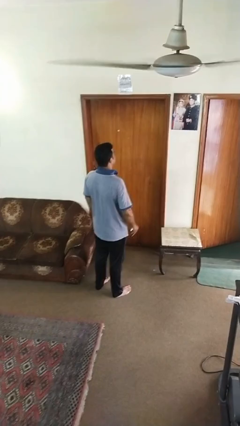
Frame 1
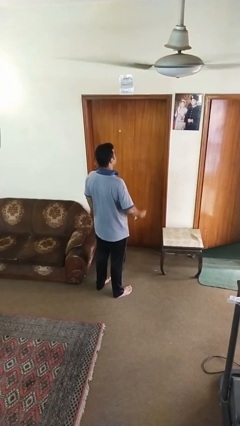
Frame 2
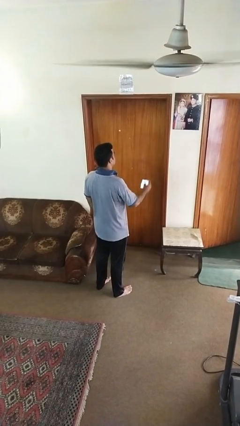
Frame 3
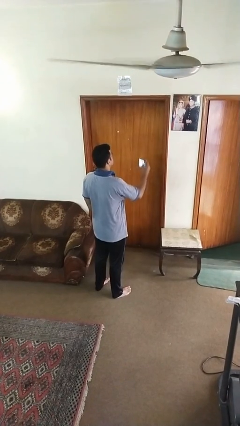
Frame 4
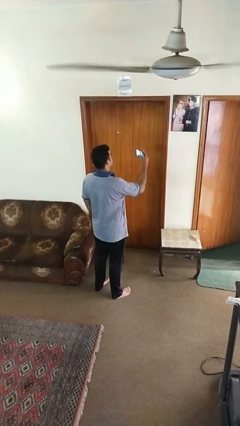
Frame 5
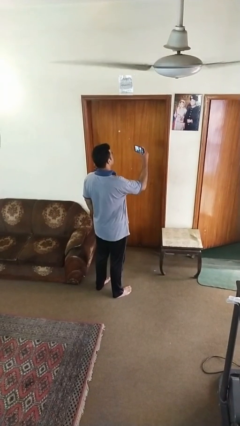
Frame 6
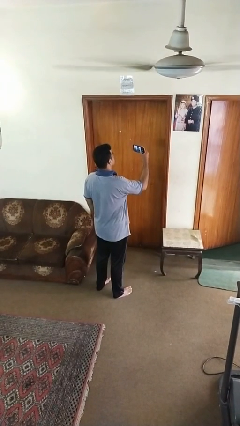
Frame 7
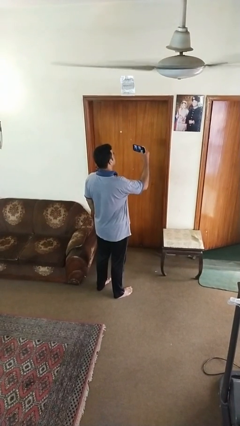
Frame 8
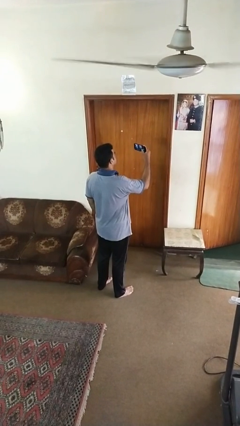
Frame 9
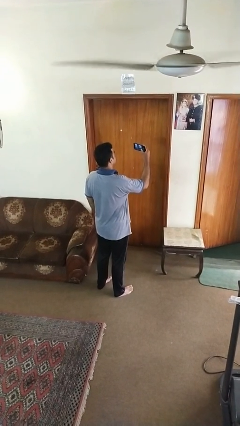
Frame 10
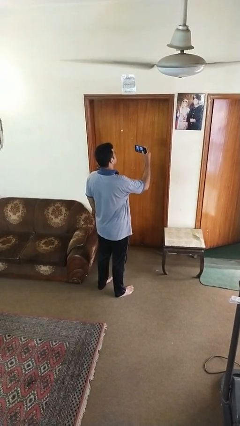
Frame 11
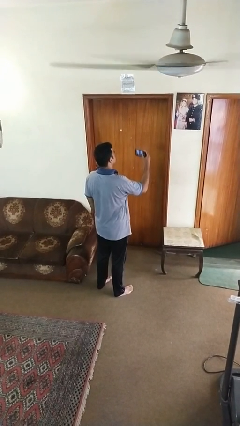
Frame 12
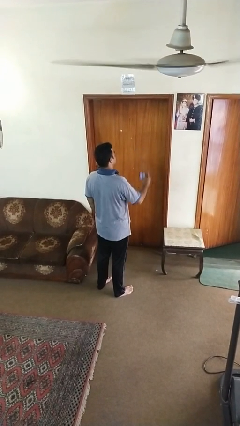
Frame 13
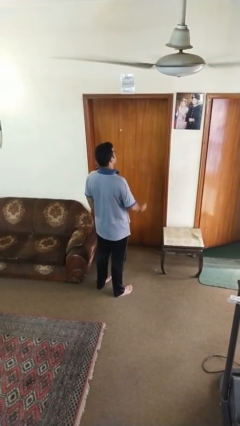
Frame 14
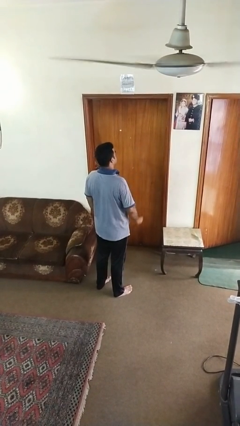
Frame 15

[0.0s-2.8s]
person takes selfie

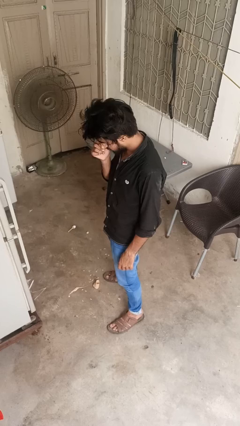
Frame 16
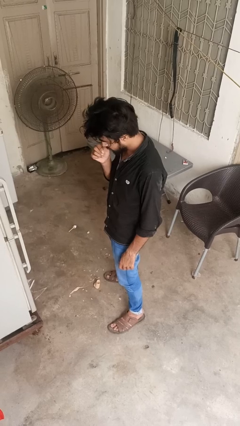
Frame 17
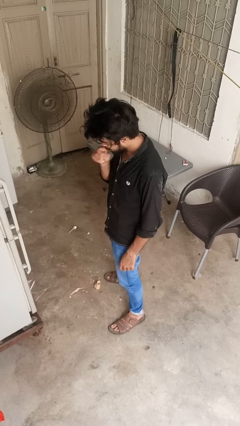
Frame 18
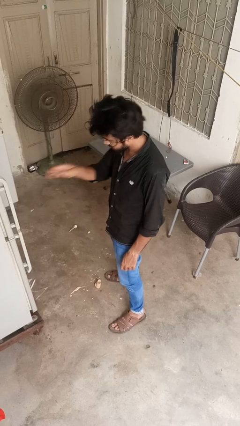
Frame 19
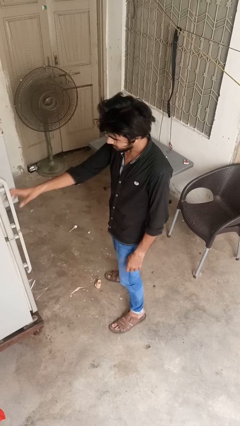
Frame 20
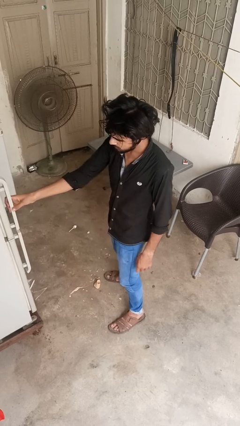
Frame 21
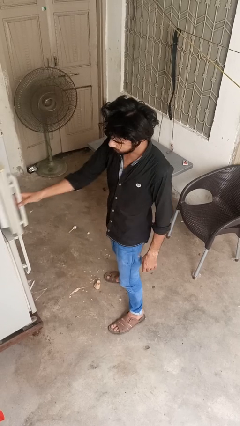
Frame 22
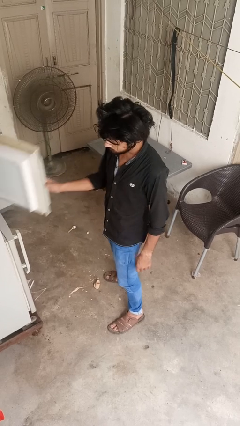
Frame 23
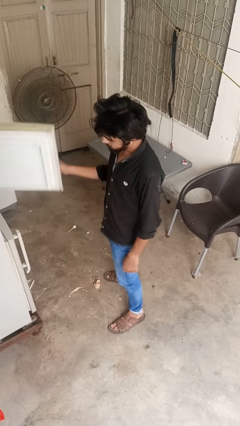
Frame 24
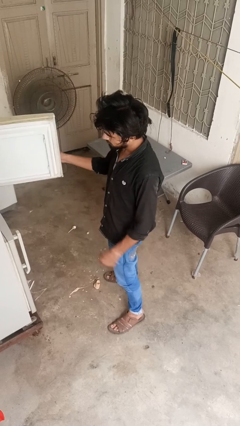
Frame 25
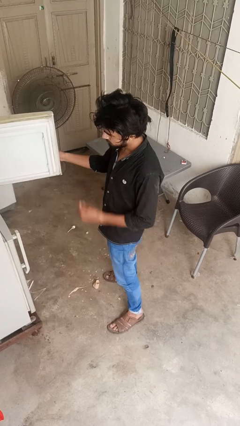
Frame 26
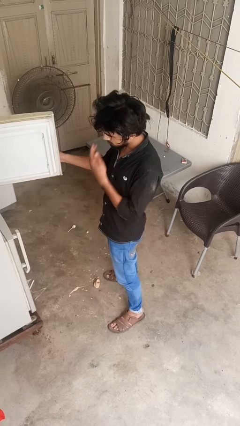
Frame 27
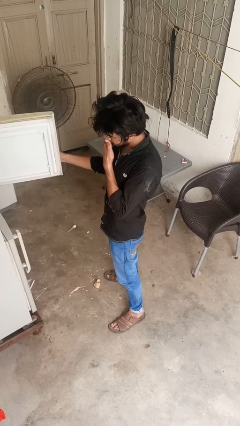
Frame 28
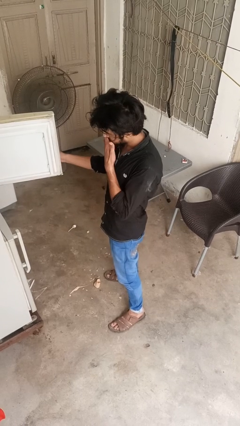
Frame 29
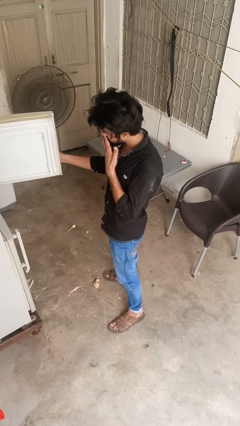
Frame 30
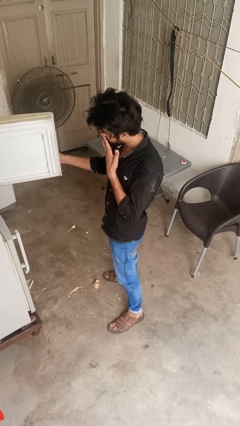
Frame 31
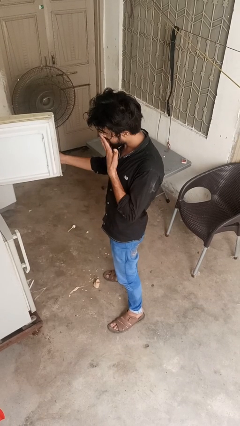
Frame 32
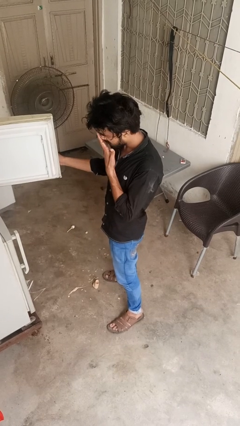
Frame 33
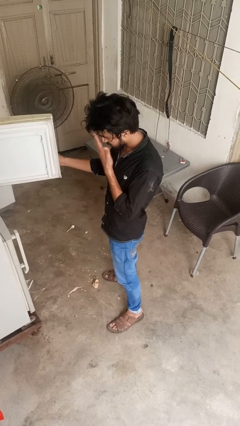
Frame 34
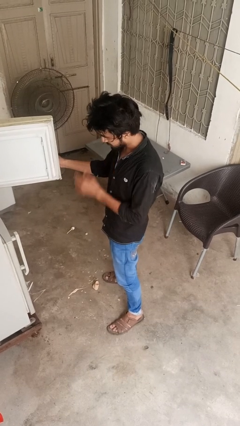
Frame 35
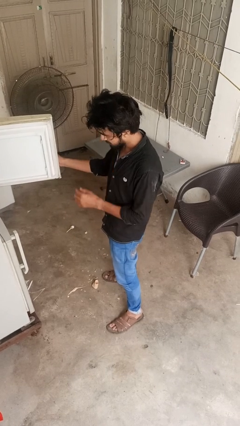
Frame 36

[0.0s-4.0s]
person opens refrigerator

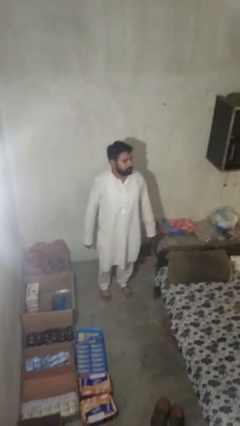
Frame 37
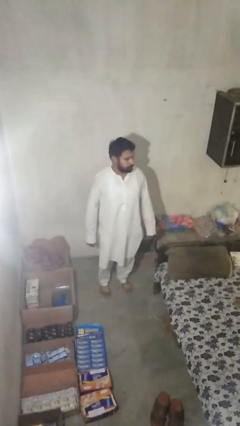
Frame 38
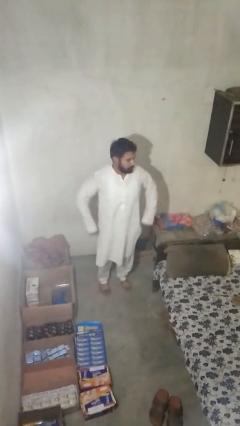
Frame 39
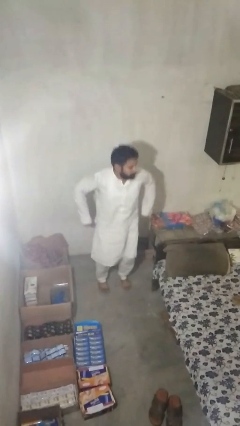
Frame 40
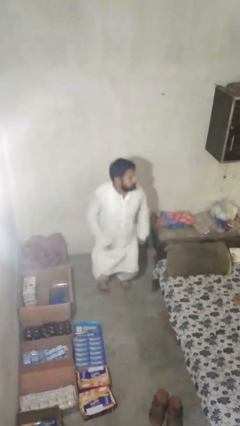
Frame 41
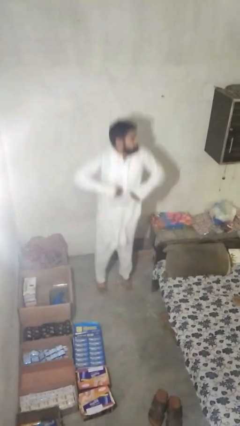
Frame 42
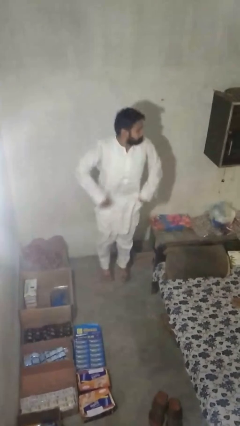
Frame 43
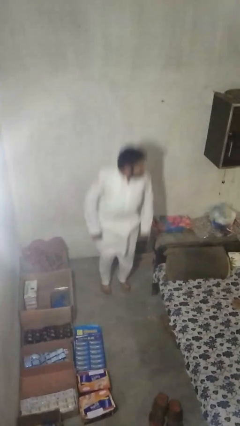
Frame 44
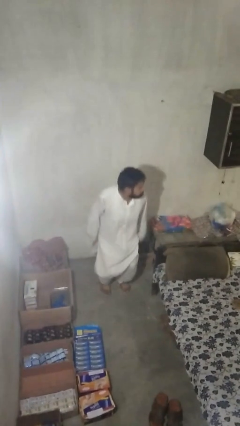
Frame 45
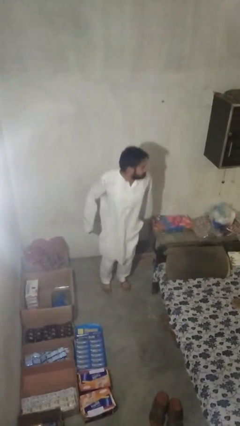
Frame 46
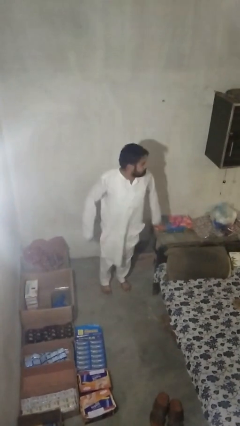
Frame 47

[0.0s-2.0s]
person jumps

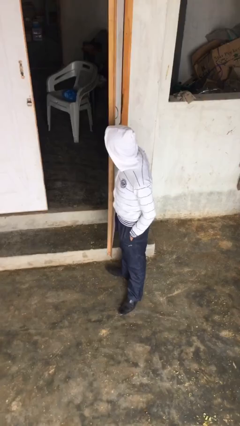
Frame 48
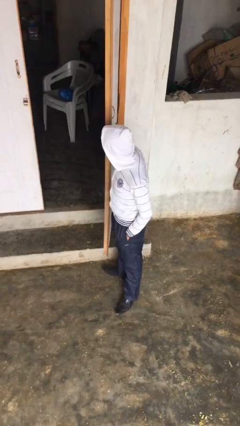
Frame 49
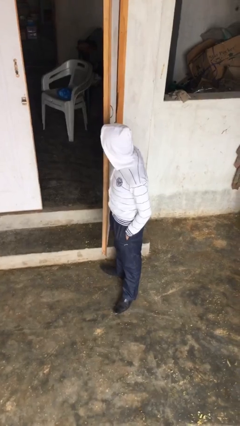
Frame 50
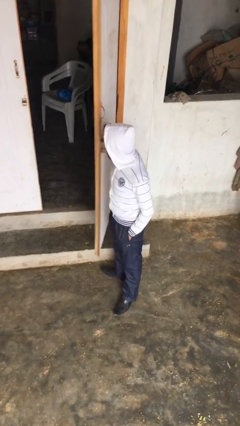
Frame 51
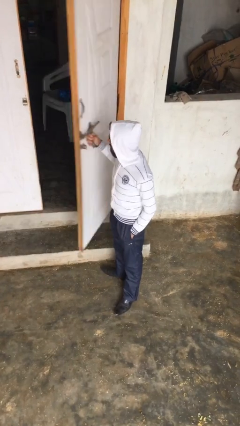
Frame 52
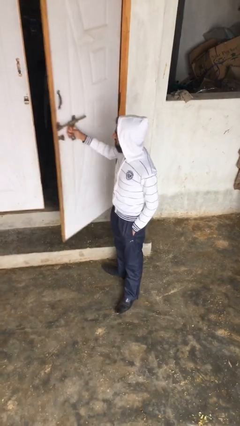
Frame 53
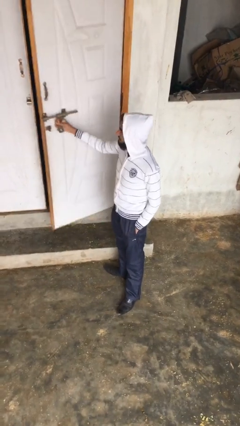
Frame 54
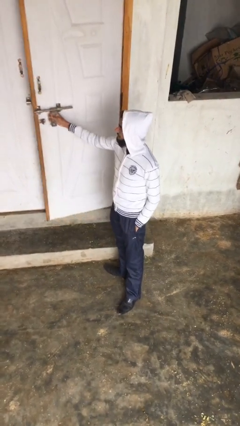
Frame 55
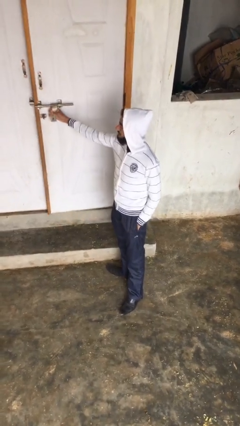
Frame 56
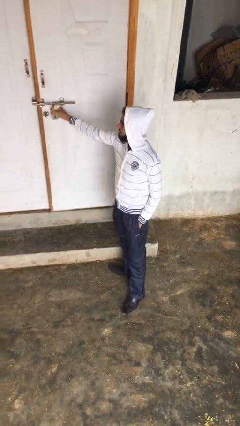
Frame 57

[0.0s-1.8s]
person closes facility door

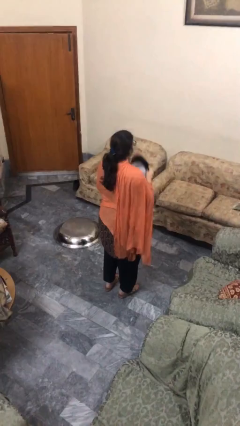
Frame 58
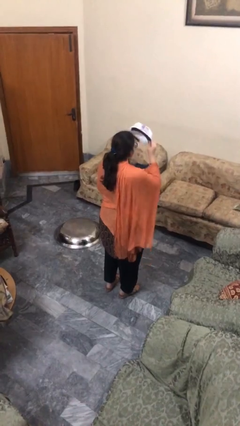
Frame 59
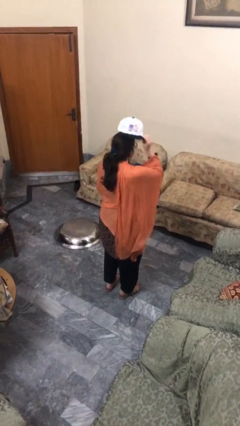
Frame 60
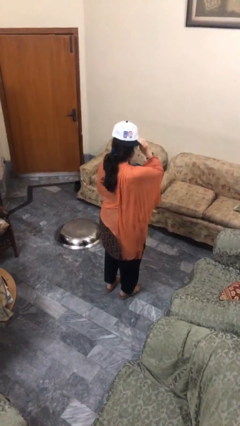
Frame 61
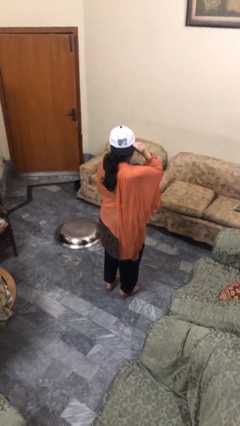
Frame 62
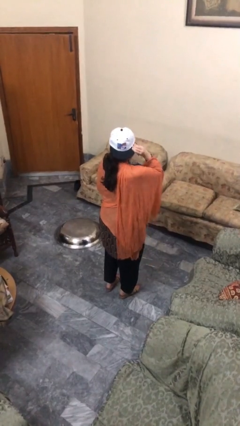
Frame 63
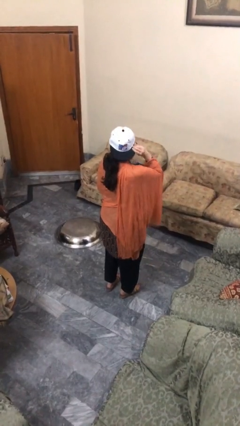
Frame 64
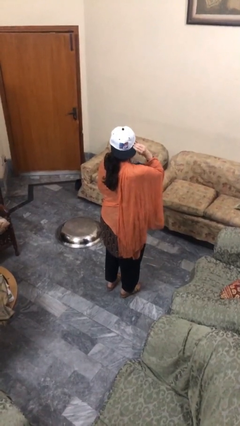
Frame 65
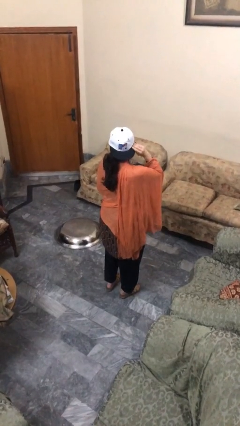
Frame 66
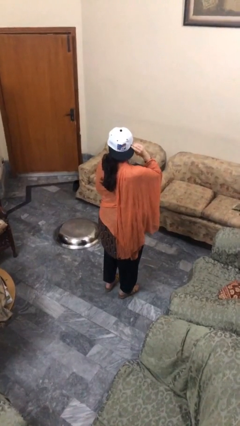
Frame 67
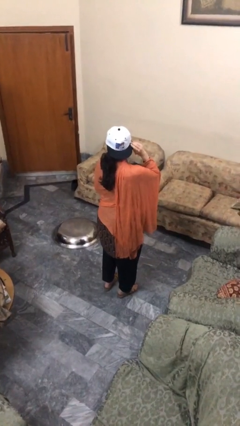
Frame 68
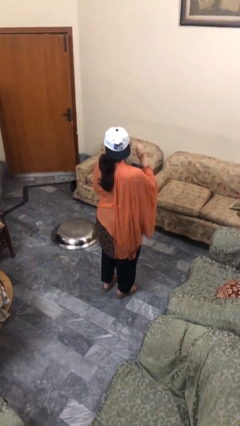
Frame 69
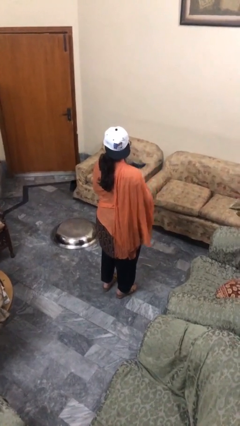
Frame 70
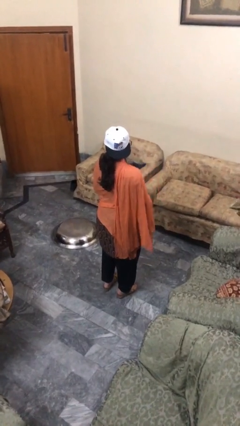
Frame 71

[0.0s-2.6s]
person puts on hat

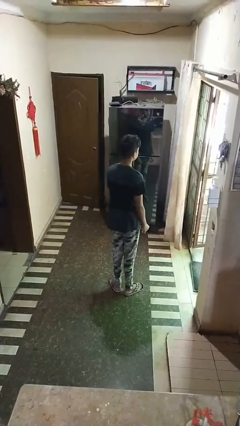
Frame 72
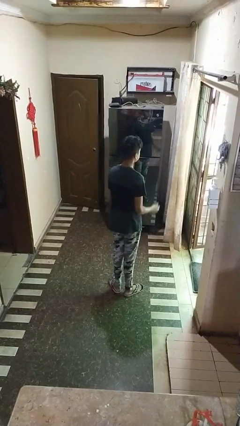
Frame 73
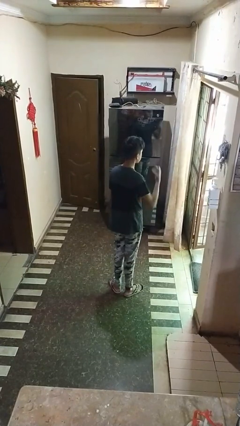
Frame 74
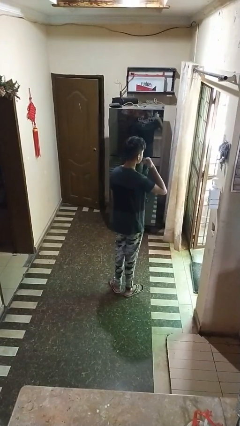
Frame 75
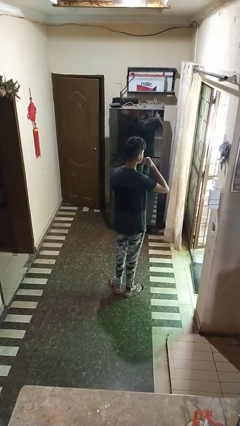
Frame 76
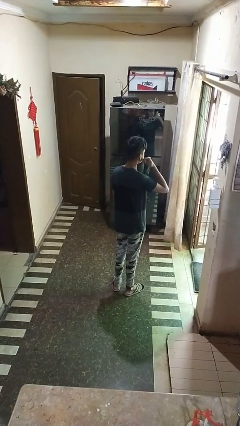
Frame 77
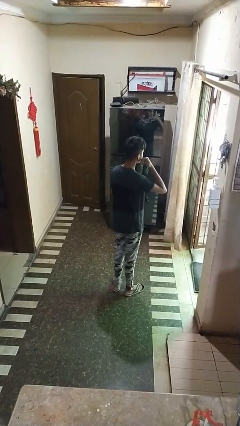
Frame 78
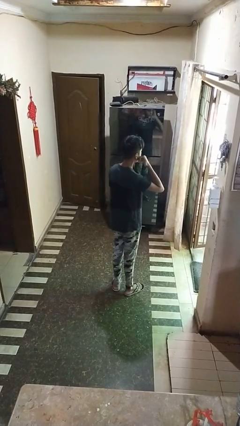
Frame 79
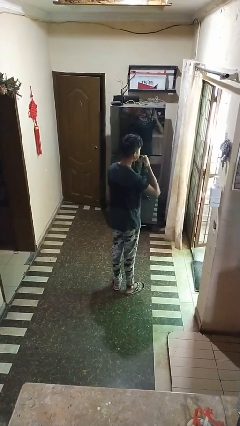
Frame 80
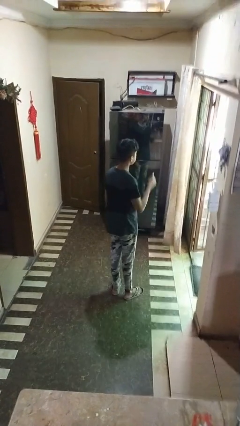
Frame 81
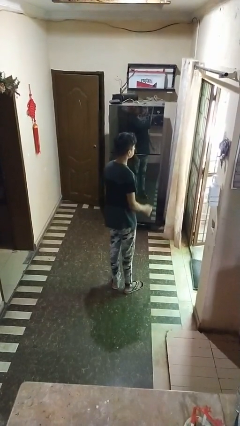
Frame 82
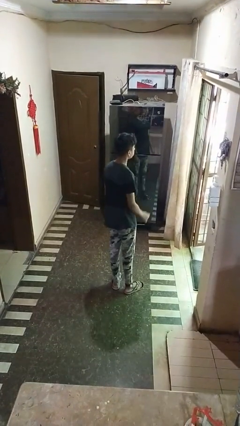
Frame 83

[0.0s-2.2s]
person gestures call me

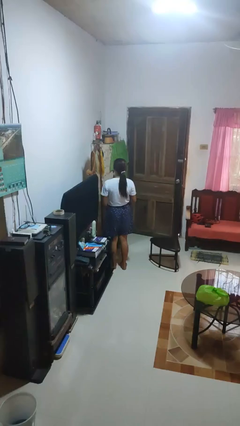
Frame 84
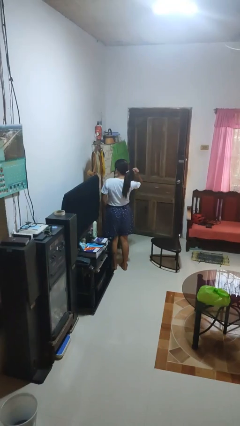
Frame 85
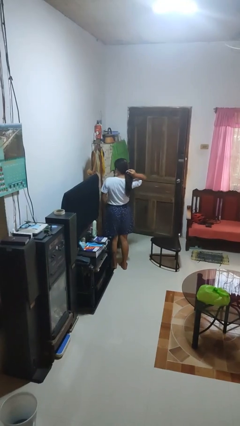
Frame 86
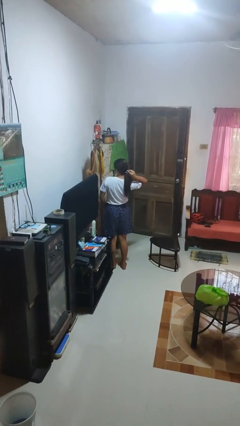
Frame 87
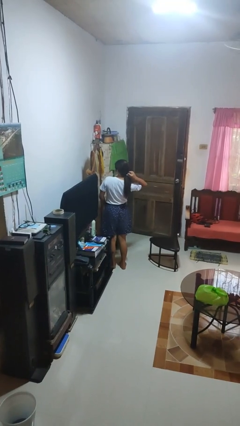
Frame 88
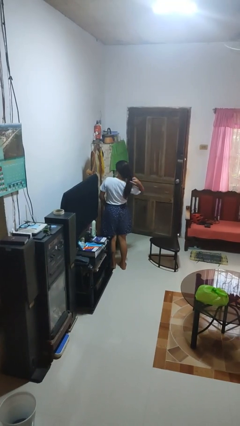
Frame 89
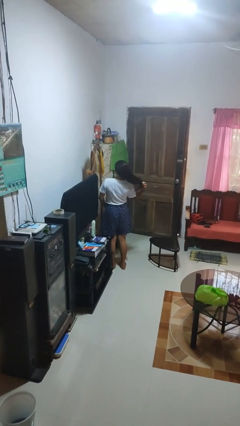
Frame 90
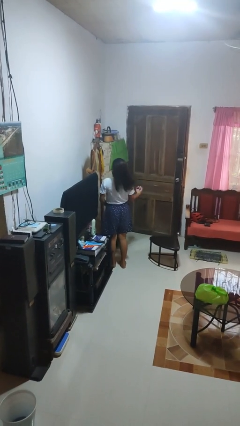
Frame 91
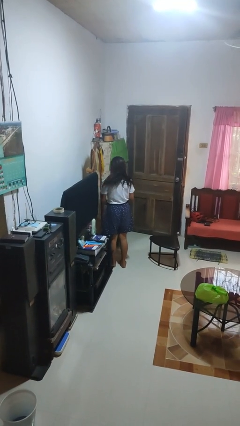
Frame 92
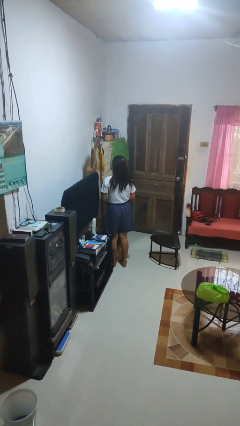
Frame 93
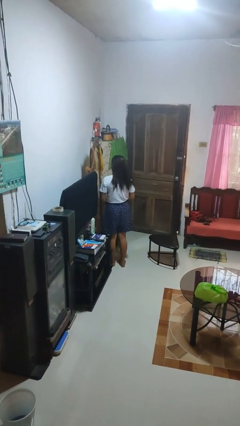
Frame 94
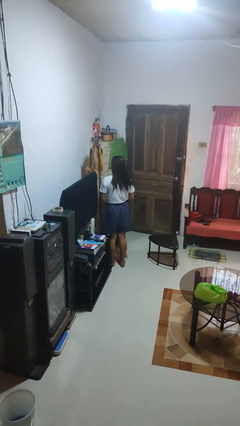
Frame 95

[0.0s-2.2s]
person takes off hairtie
